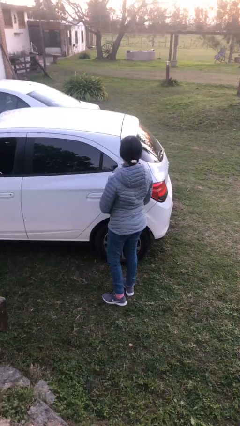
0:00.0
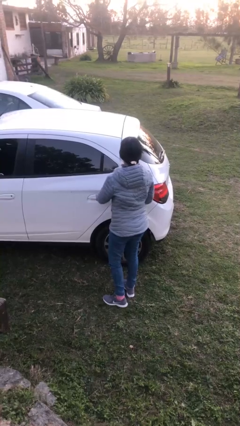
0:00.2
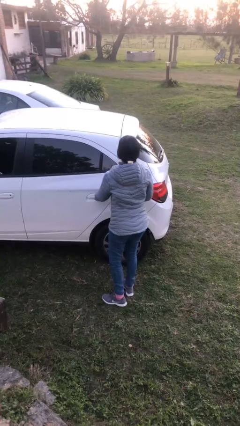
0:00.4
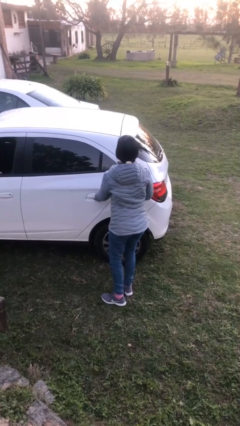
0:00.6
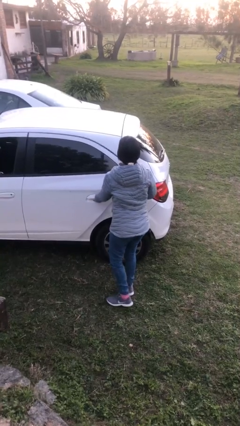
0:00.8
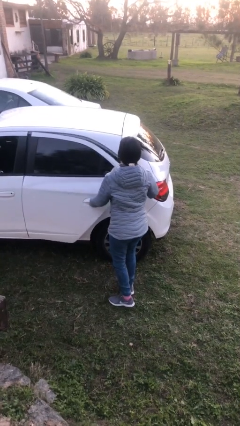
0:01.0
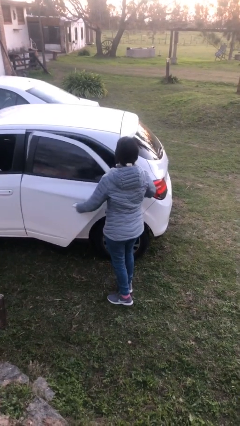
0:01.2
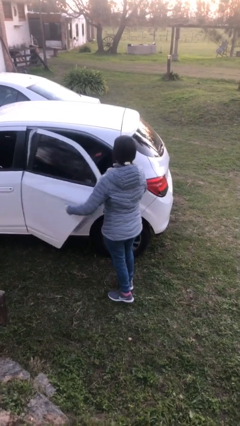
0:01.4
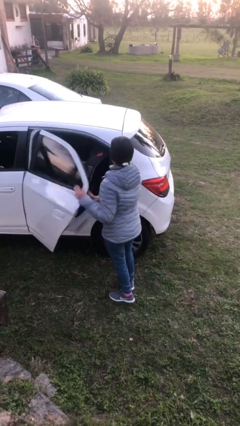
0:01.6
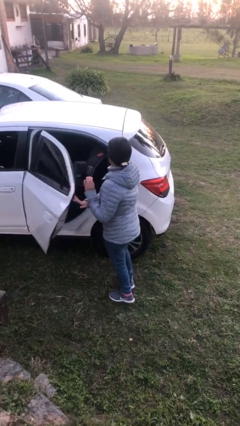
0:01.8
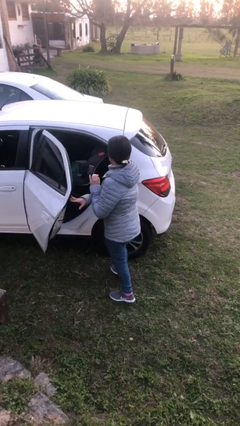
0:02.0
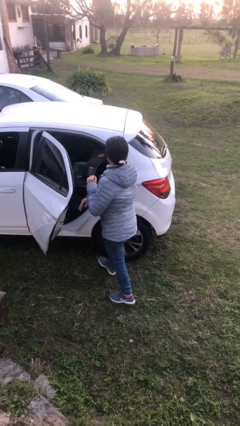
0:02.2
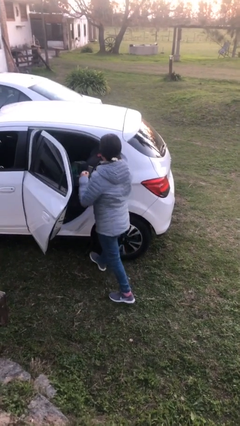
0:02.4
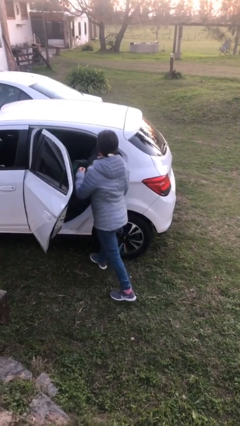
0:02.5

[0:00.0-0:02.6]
person opens car door

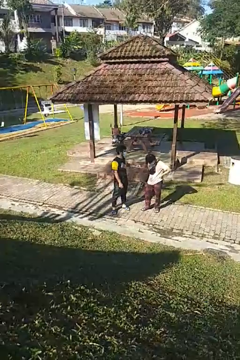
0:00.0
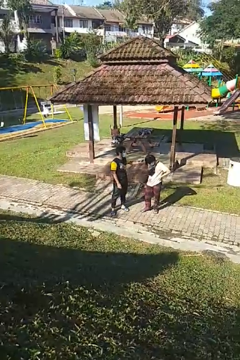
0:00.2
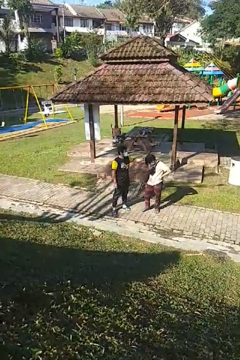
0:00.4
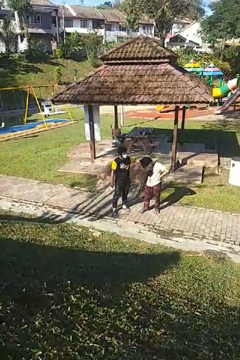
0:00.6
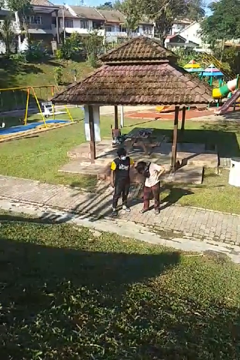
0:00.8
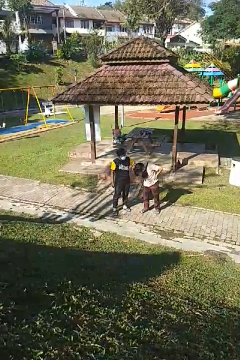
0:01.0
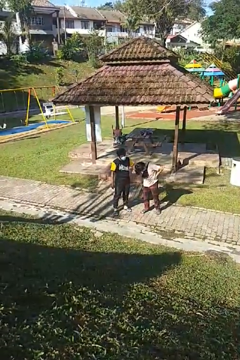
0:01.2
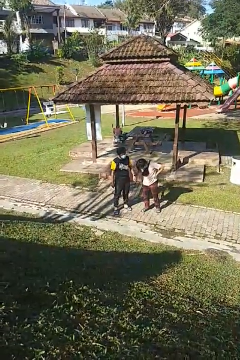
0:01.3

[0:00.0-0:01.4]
person grabs person by hair

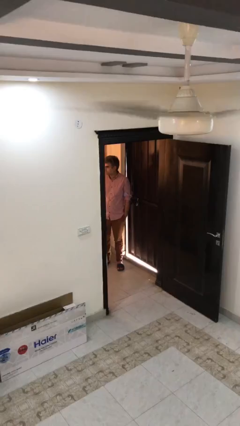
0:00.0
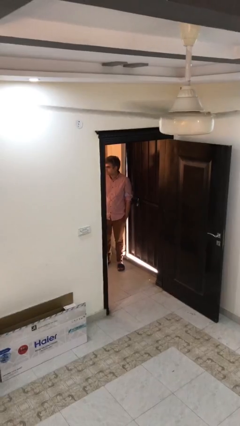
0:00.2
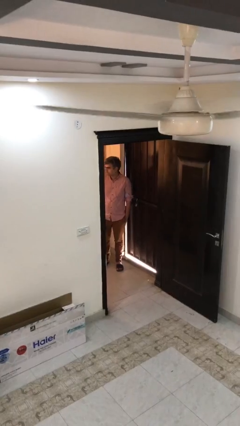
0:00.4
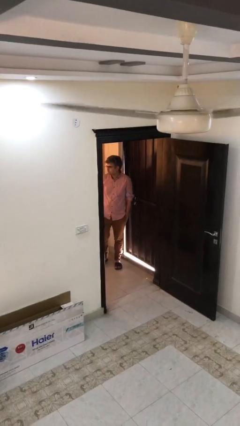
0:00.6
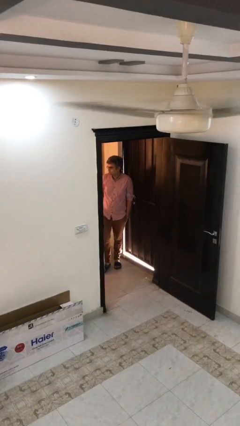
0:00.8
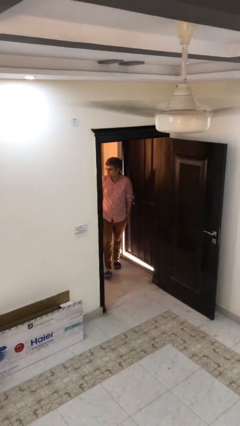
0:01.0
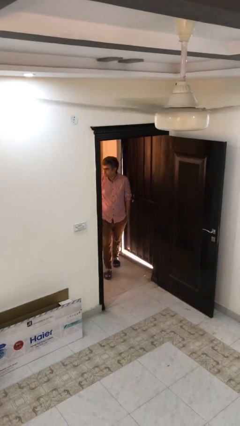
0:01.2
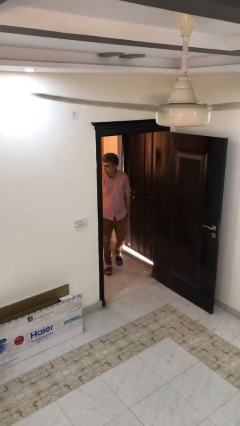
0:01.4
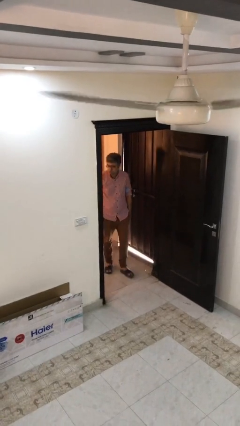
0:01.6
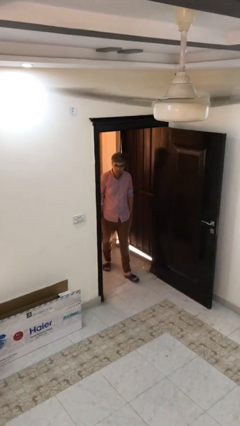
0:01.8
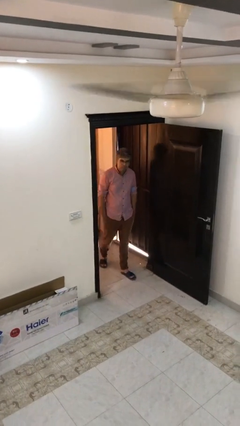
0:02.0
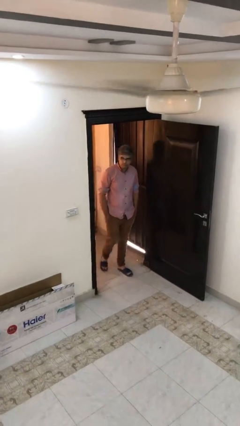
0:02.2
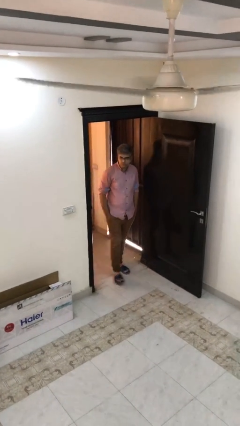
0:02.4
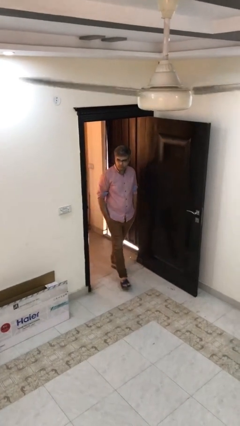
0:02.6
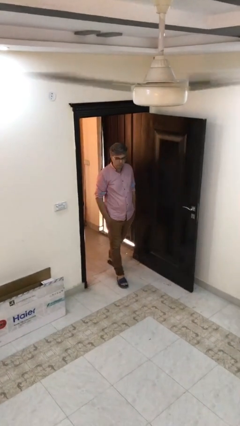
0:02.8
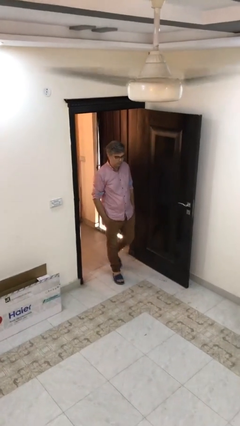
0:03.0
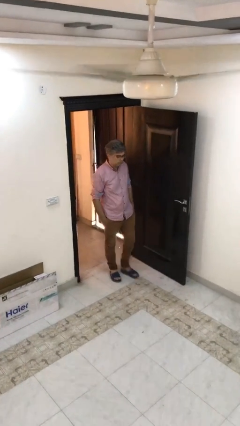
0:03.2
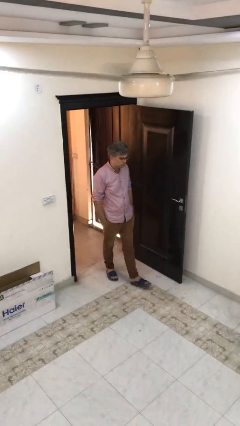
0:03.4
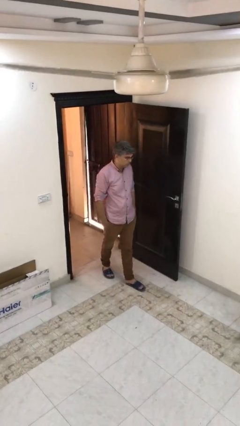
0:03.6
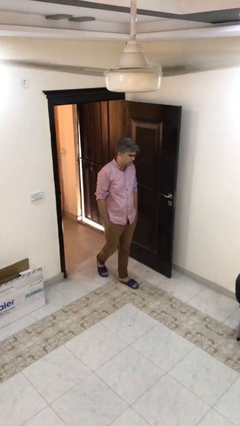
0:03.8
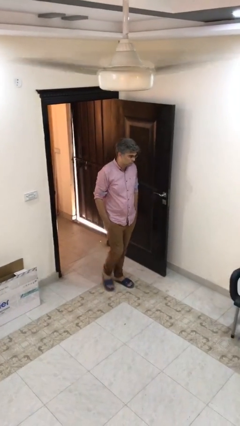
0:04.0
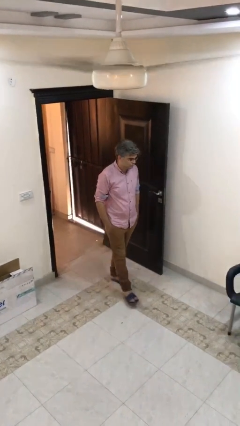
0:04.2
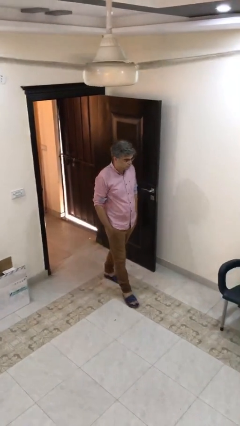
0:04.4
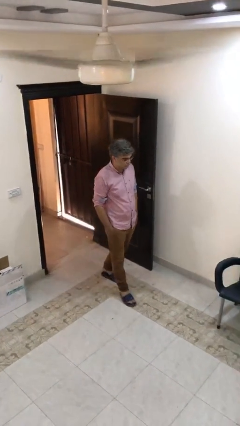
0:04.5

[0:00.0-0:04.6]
person enters scene through structure

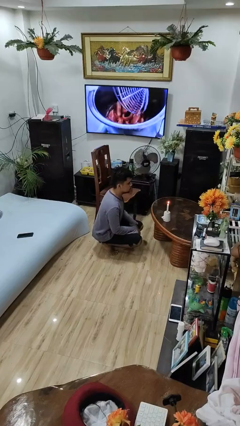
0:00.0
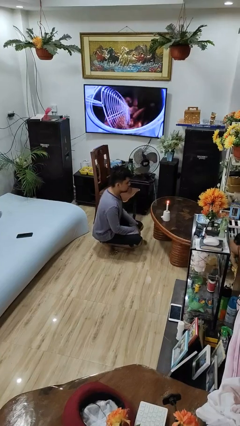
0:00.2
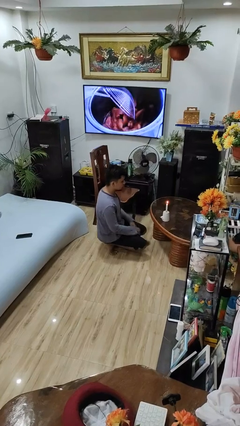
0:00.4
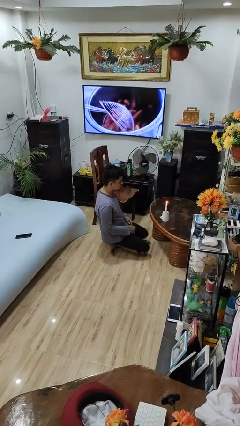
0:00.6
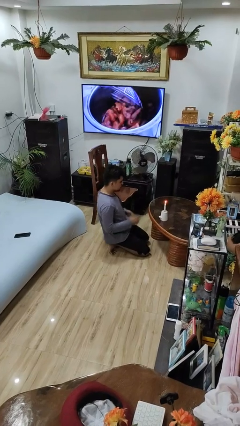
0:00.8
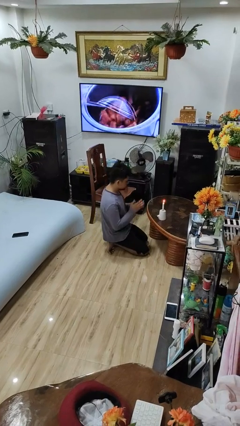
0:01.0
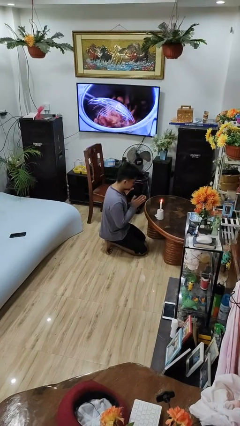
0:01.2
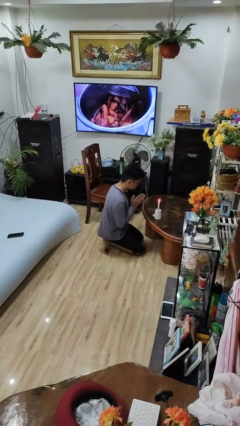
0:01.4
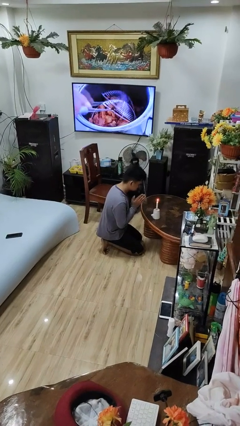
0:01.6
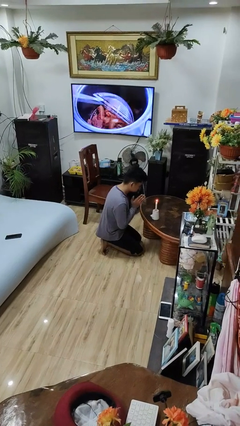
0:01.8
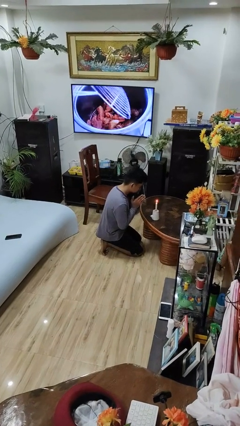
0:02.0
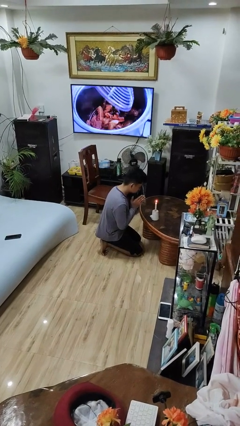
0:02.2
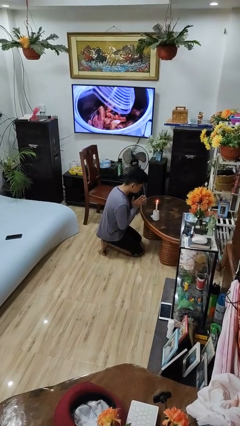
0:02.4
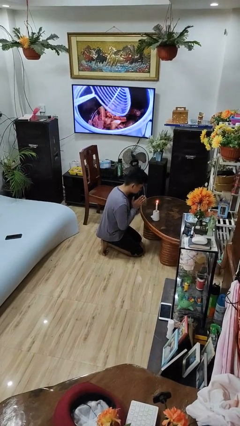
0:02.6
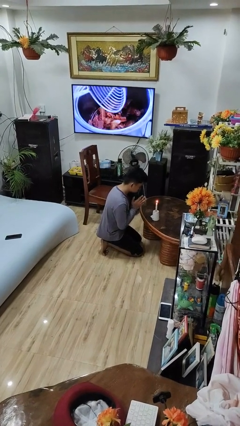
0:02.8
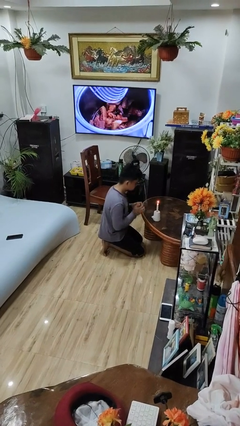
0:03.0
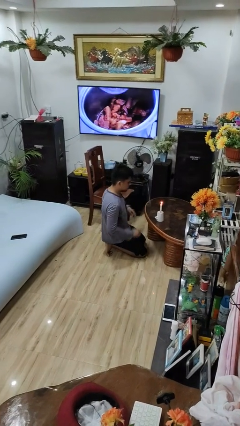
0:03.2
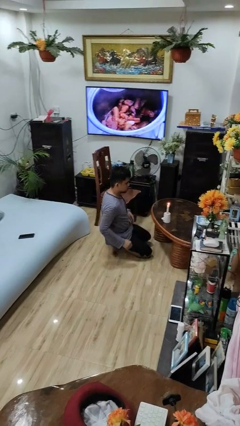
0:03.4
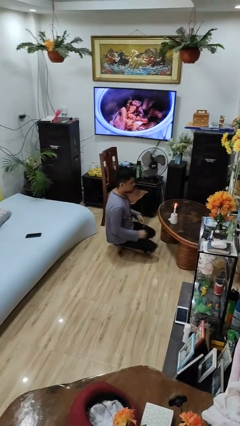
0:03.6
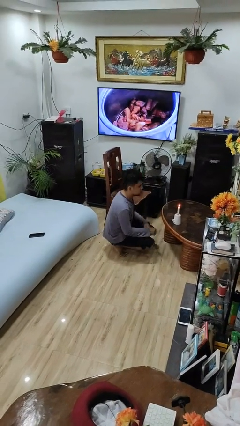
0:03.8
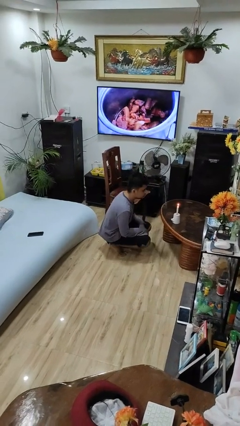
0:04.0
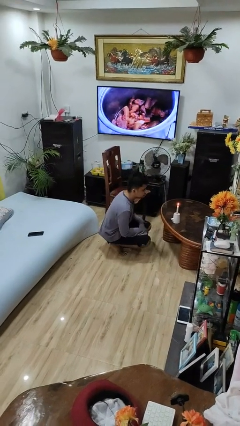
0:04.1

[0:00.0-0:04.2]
person prays

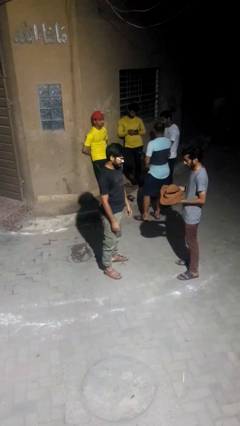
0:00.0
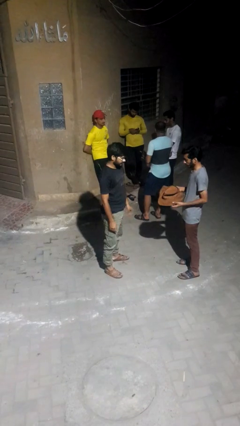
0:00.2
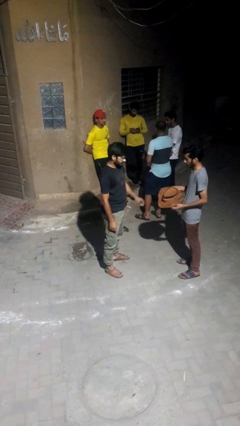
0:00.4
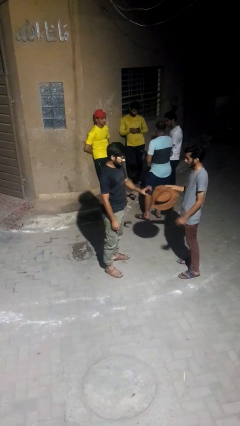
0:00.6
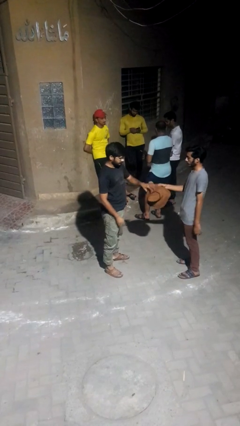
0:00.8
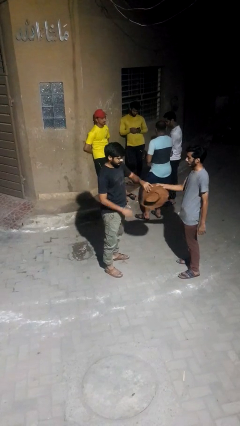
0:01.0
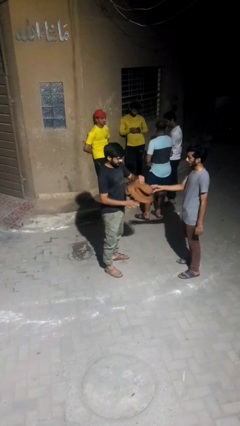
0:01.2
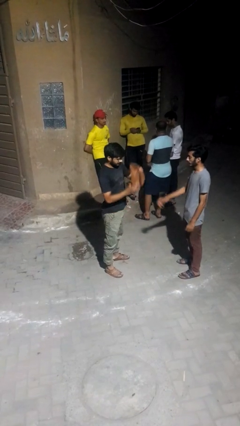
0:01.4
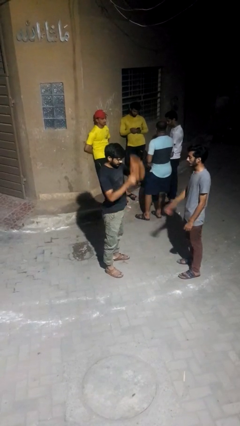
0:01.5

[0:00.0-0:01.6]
person transfers object to person

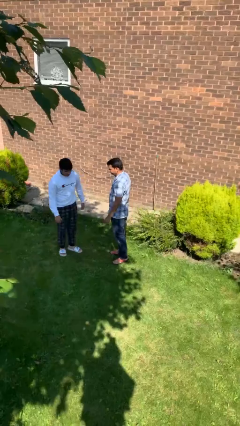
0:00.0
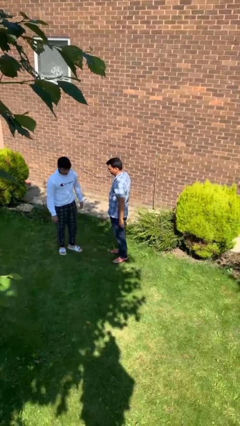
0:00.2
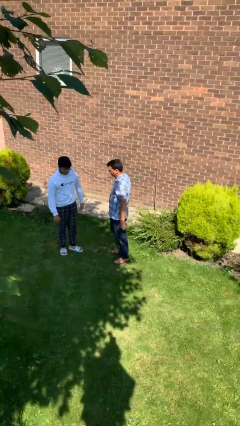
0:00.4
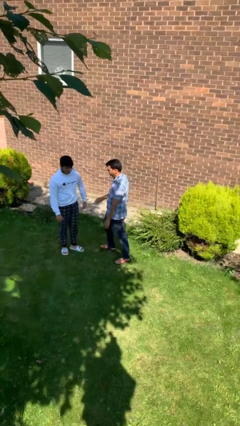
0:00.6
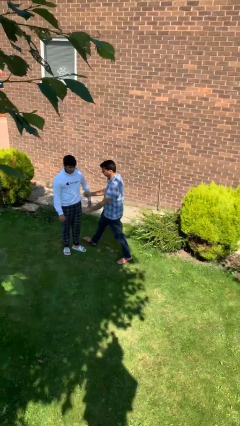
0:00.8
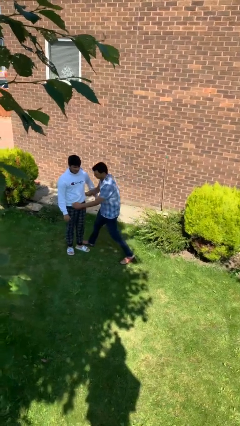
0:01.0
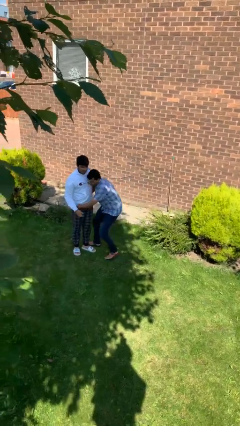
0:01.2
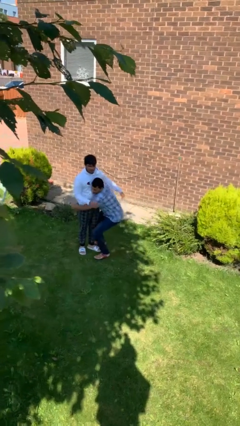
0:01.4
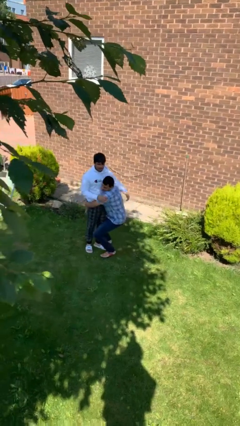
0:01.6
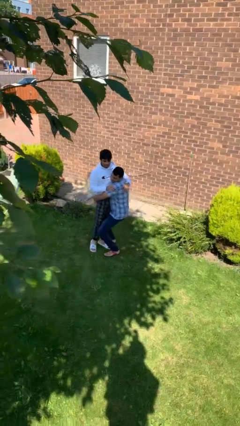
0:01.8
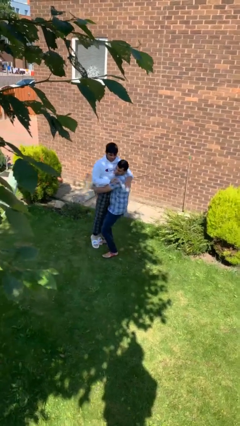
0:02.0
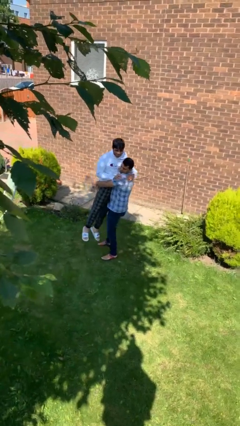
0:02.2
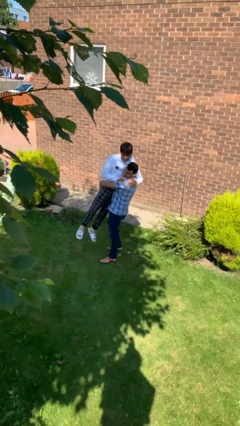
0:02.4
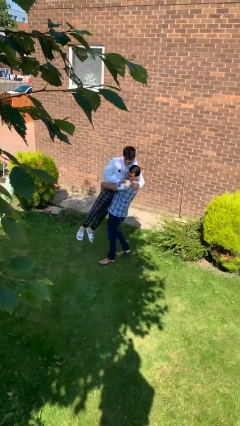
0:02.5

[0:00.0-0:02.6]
person picks up person

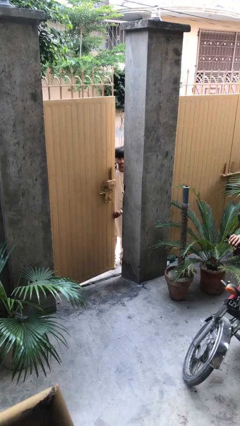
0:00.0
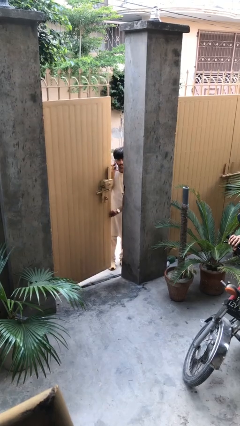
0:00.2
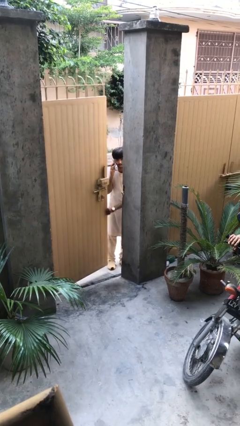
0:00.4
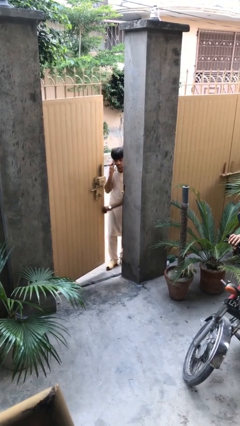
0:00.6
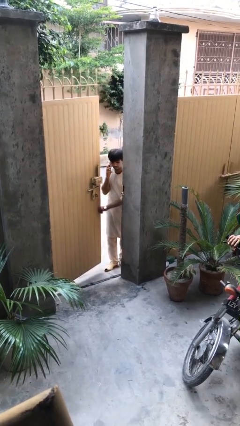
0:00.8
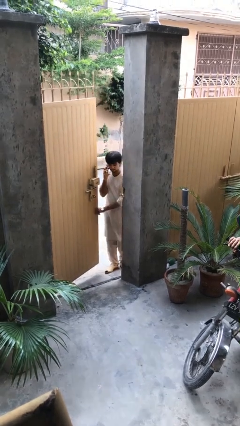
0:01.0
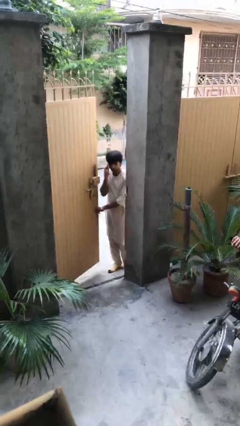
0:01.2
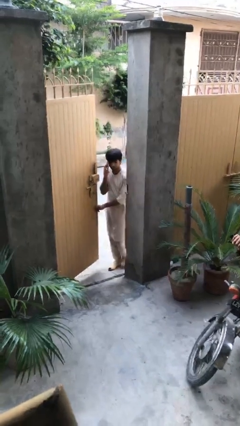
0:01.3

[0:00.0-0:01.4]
person opens facility door
